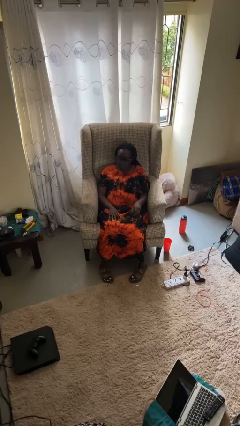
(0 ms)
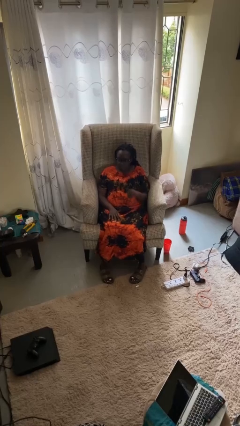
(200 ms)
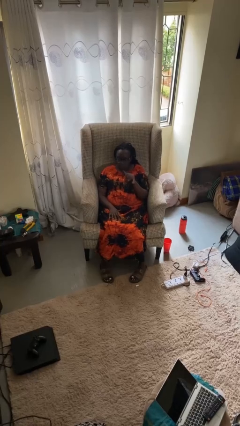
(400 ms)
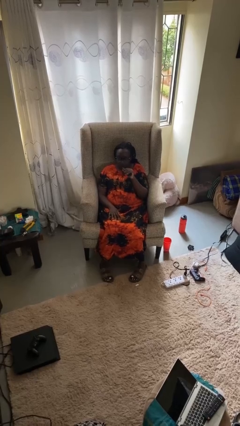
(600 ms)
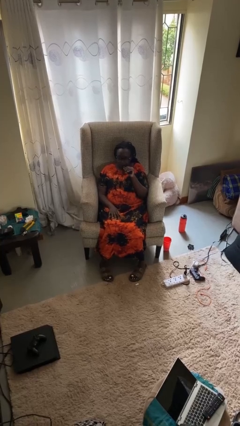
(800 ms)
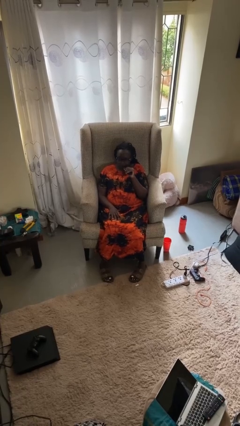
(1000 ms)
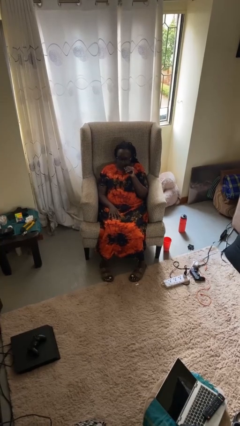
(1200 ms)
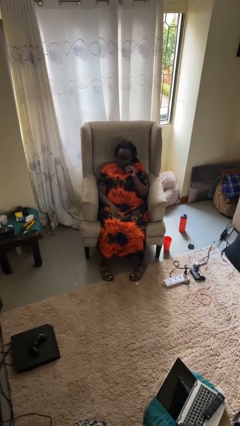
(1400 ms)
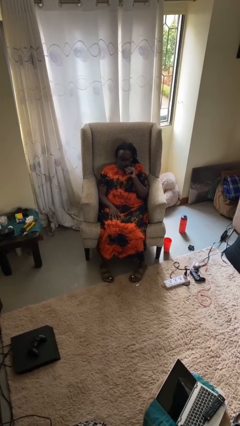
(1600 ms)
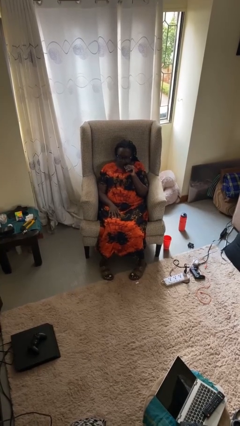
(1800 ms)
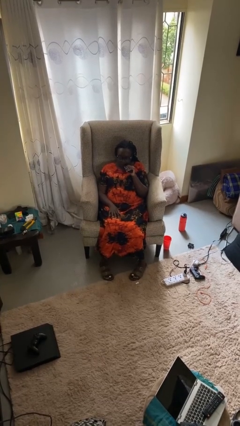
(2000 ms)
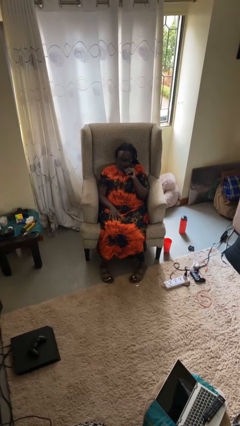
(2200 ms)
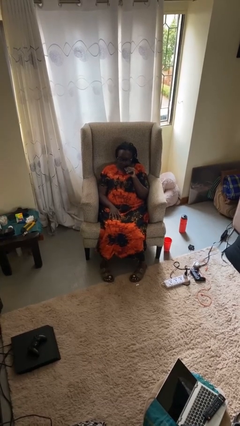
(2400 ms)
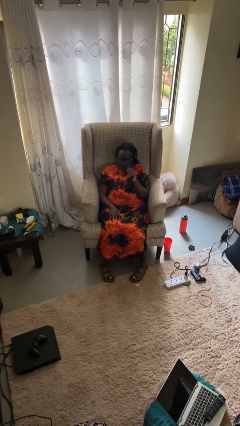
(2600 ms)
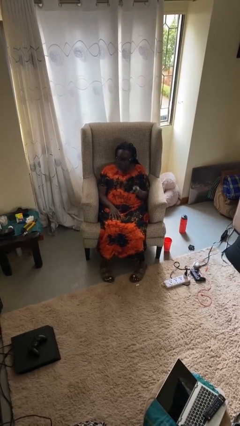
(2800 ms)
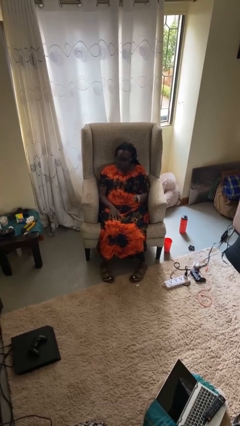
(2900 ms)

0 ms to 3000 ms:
person vapes

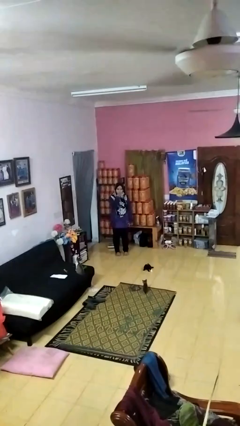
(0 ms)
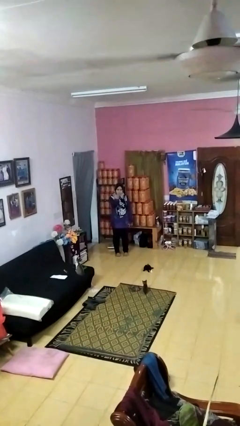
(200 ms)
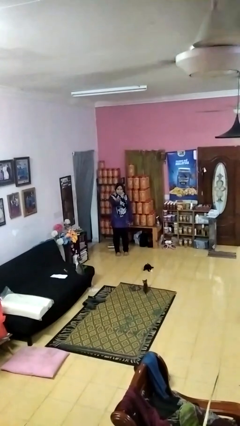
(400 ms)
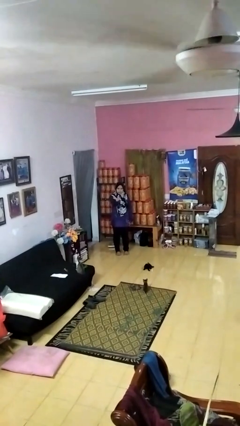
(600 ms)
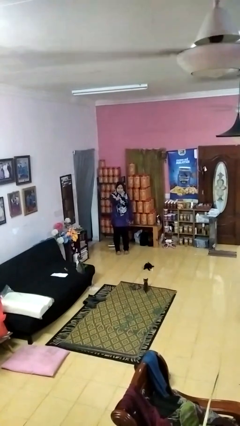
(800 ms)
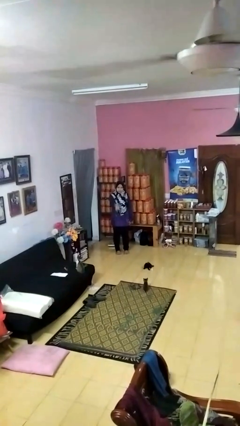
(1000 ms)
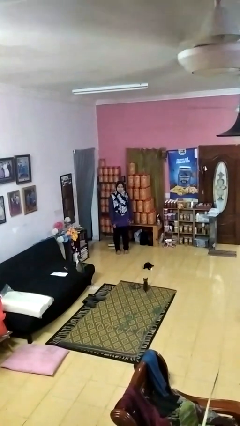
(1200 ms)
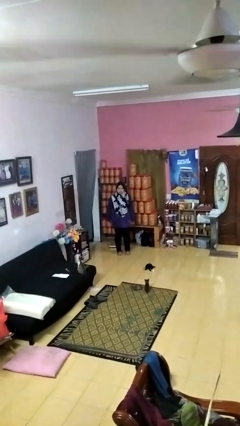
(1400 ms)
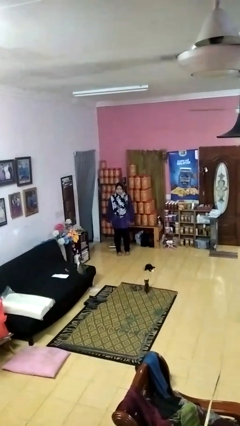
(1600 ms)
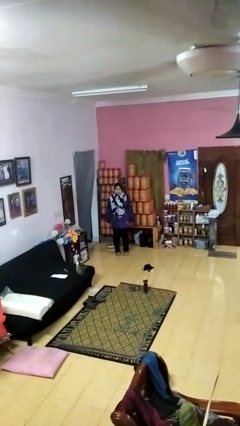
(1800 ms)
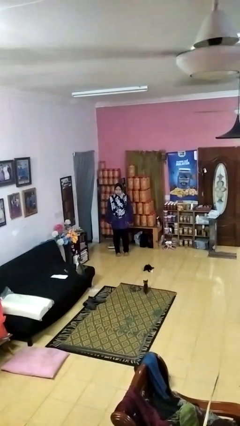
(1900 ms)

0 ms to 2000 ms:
person gestures blow kiss

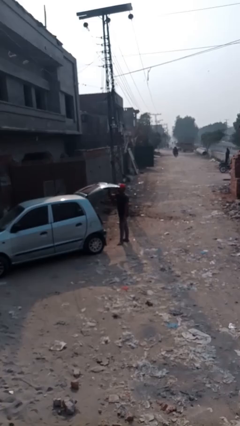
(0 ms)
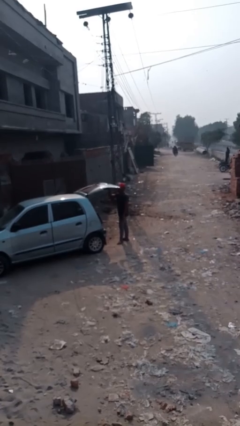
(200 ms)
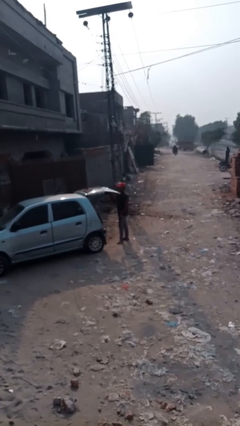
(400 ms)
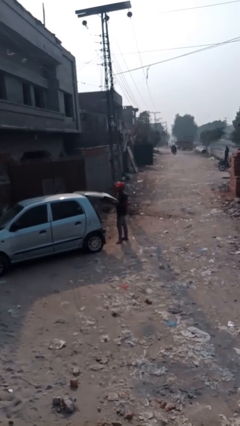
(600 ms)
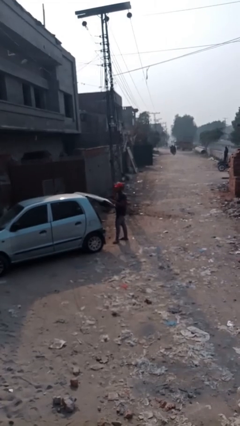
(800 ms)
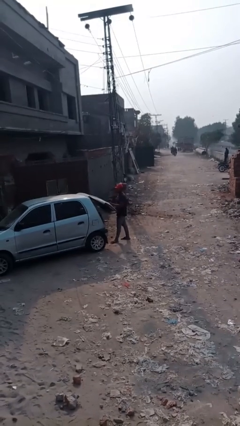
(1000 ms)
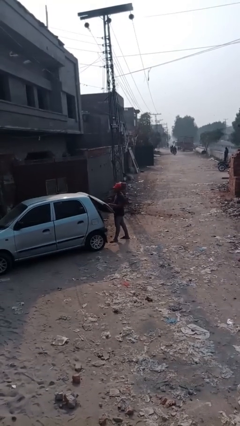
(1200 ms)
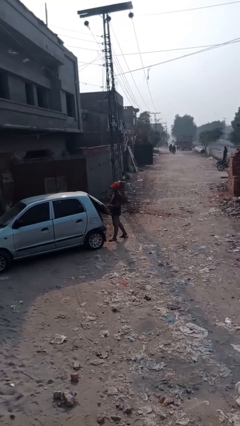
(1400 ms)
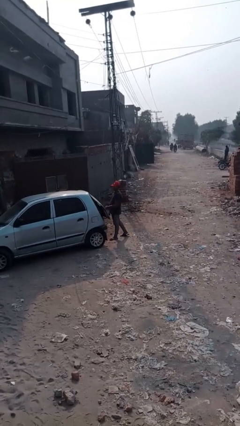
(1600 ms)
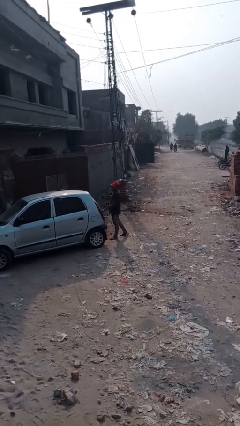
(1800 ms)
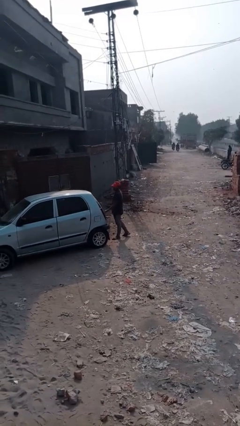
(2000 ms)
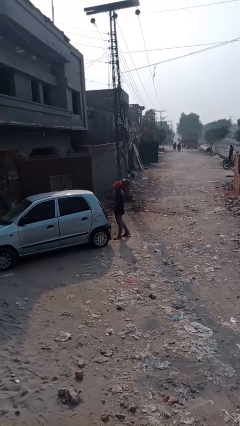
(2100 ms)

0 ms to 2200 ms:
person closes car trunk

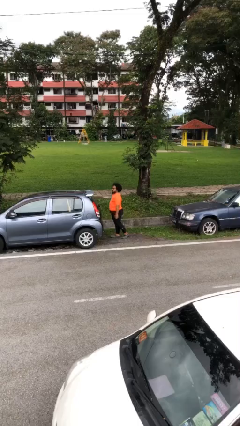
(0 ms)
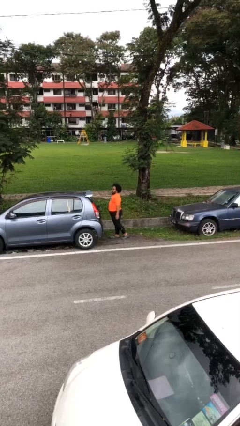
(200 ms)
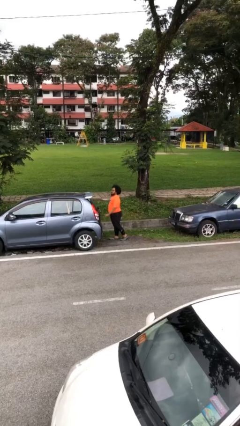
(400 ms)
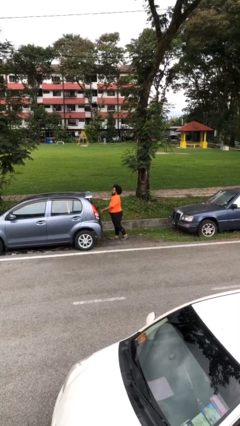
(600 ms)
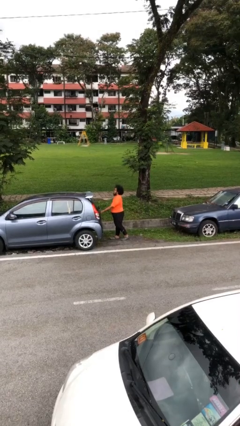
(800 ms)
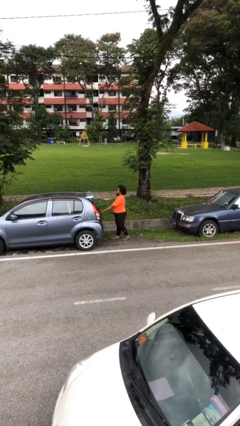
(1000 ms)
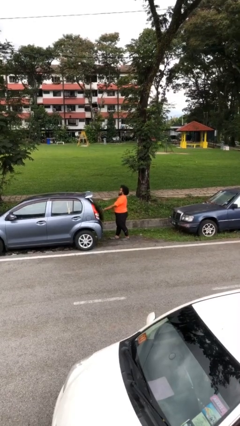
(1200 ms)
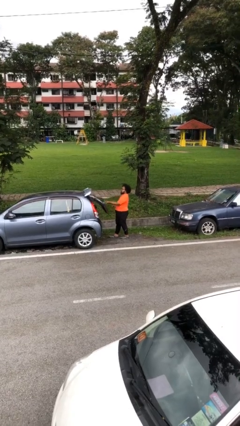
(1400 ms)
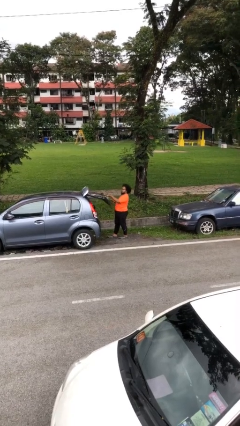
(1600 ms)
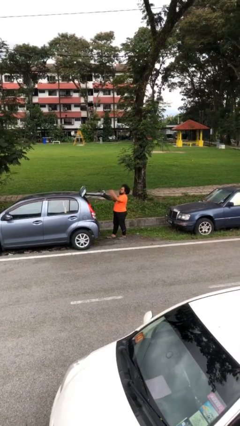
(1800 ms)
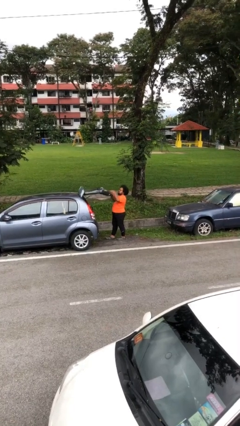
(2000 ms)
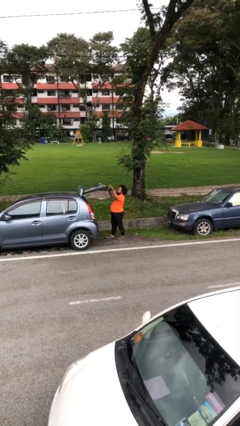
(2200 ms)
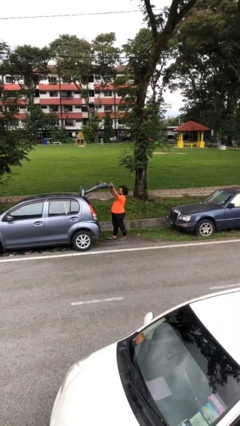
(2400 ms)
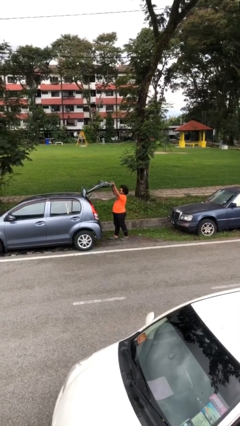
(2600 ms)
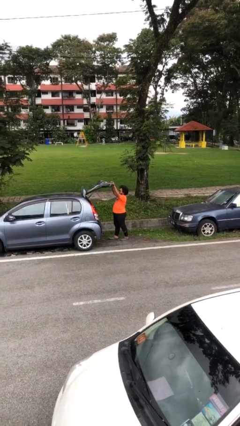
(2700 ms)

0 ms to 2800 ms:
person opens car trunk

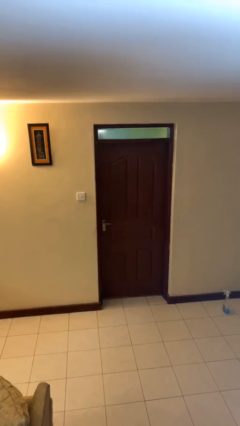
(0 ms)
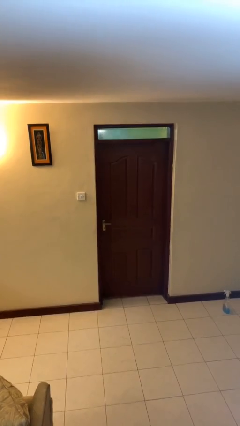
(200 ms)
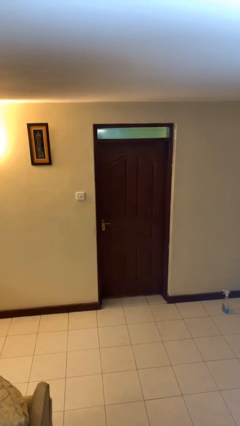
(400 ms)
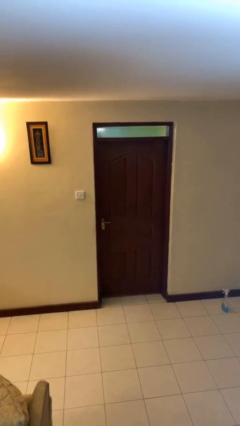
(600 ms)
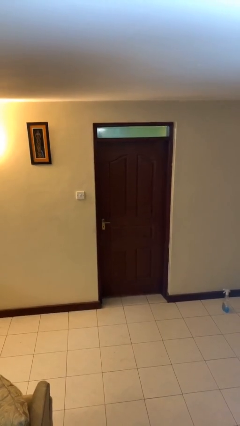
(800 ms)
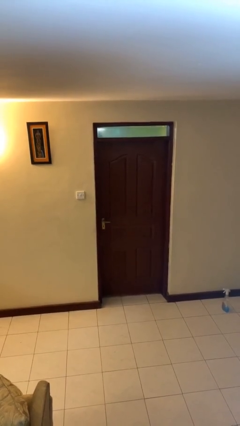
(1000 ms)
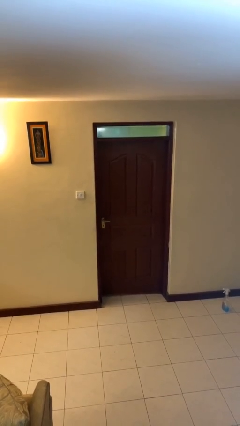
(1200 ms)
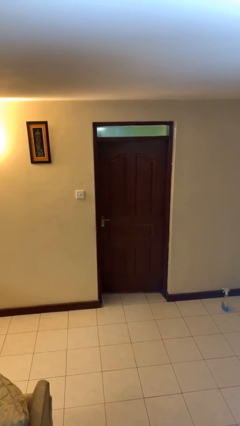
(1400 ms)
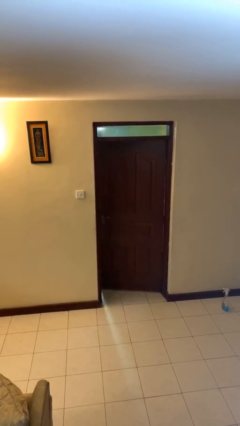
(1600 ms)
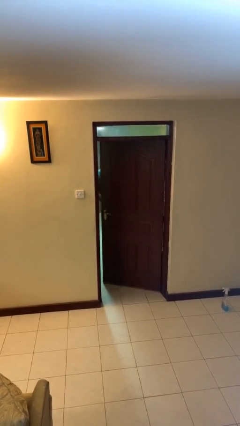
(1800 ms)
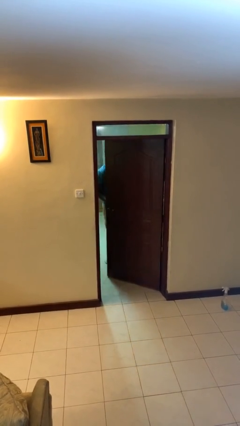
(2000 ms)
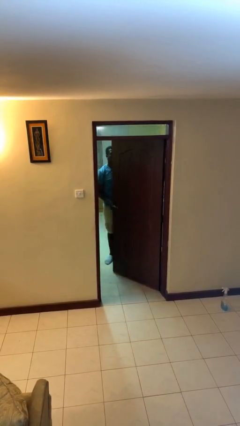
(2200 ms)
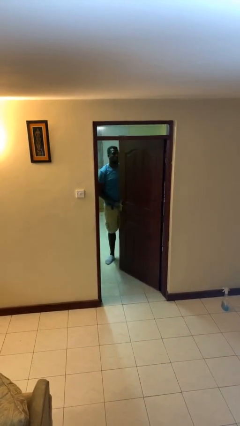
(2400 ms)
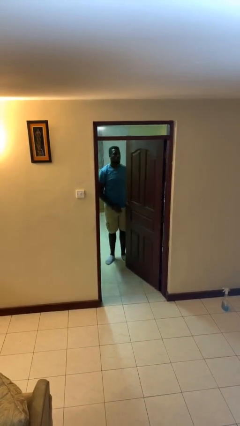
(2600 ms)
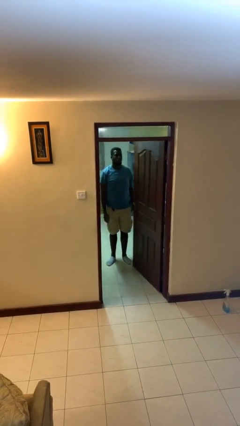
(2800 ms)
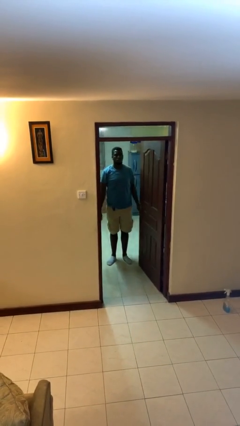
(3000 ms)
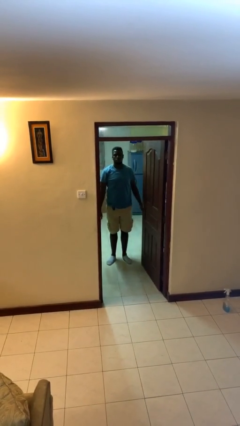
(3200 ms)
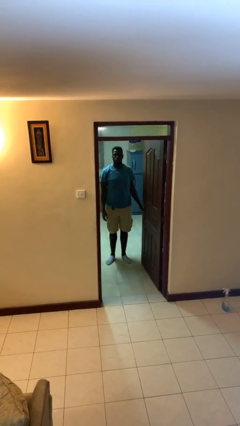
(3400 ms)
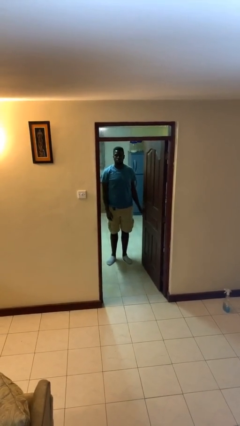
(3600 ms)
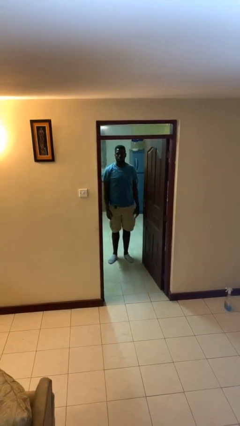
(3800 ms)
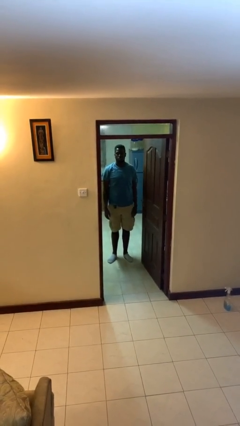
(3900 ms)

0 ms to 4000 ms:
person opens facility door

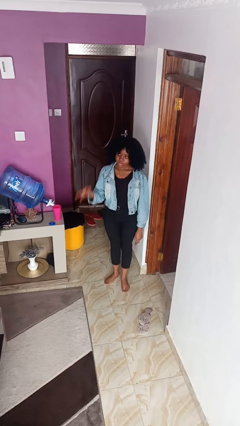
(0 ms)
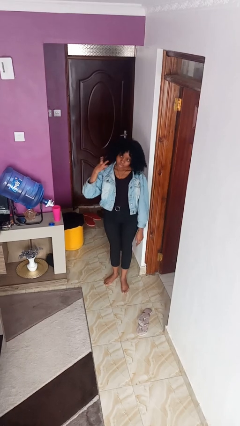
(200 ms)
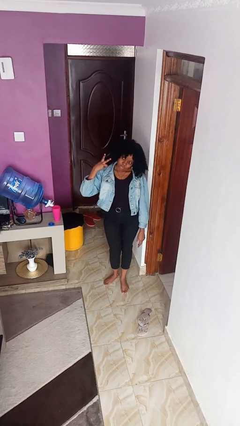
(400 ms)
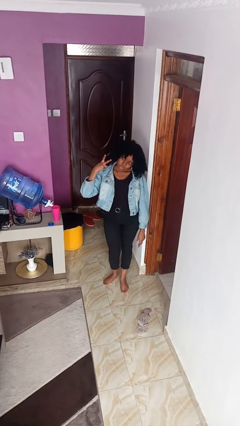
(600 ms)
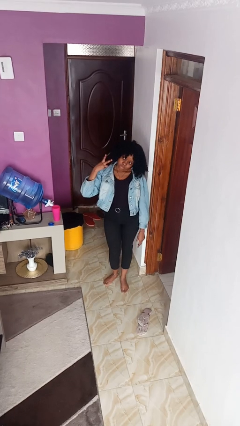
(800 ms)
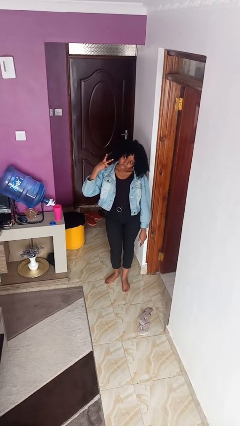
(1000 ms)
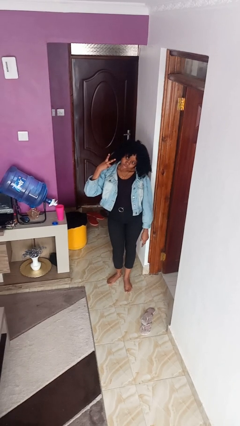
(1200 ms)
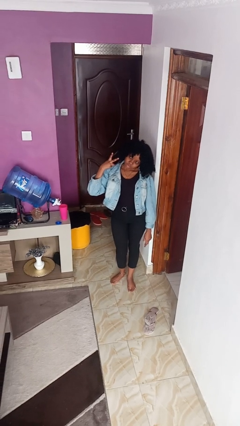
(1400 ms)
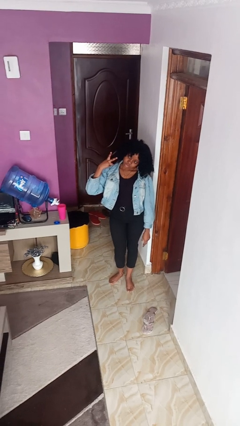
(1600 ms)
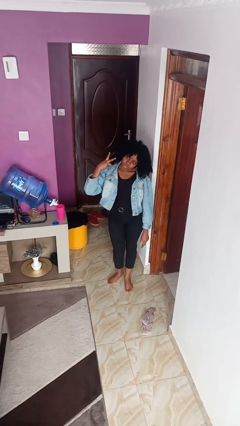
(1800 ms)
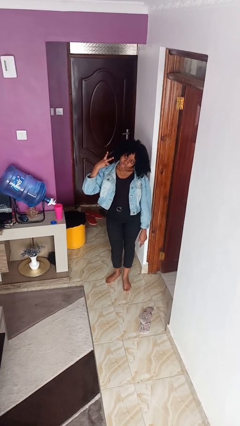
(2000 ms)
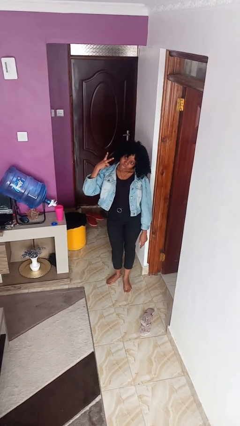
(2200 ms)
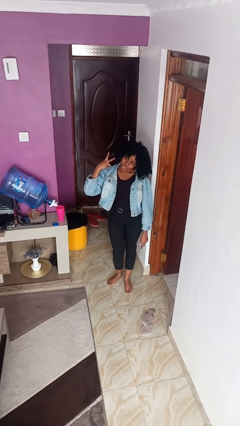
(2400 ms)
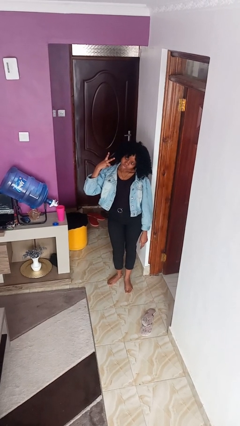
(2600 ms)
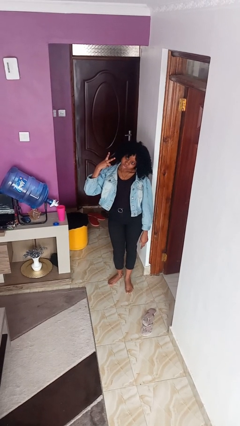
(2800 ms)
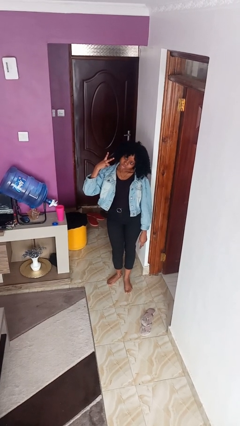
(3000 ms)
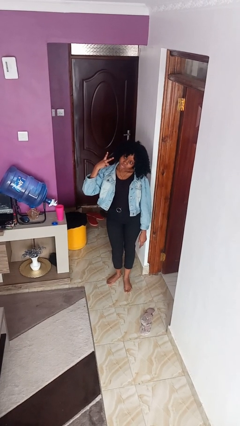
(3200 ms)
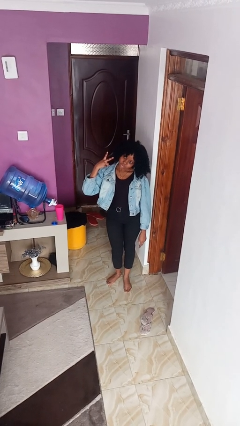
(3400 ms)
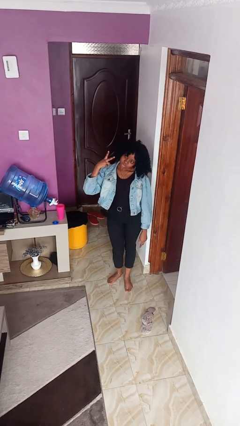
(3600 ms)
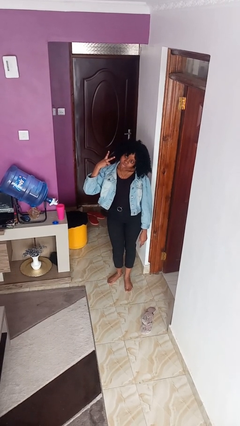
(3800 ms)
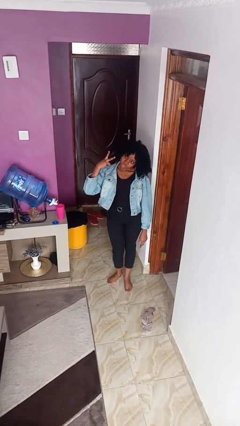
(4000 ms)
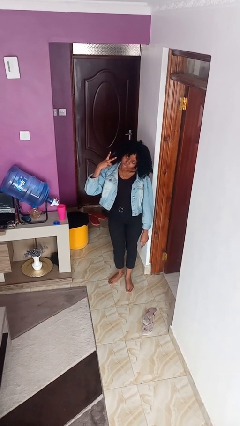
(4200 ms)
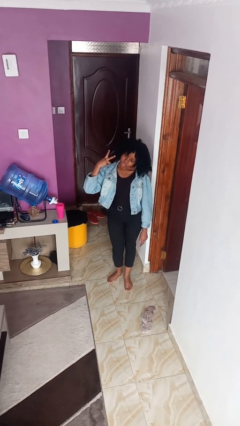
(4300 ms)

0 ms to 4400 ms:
person gestures peace
